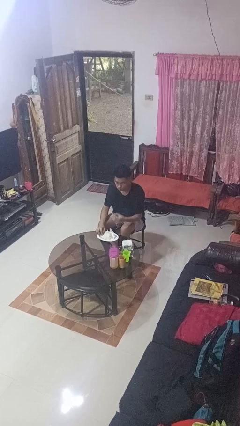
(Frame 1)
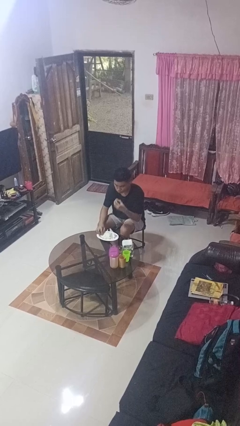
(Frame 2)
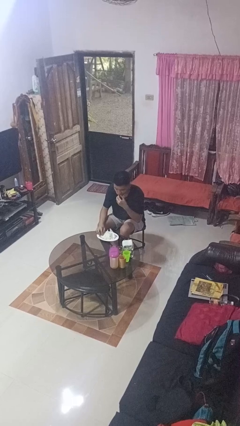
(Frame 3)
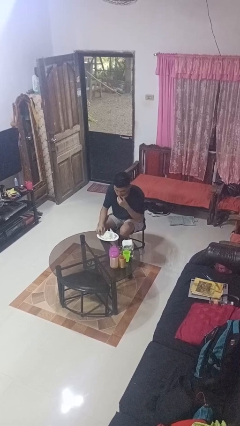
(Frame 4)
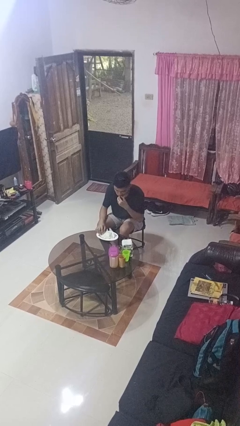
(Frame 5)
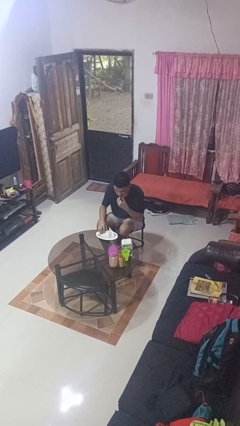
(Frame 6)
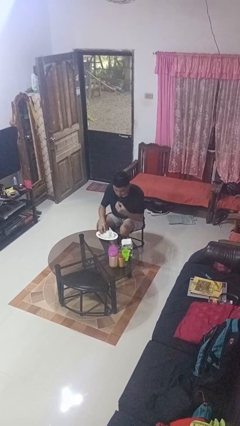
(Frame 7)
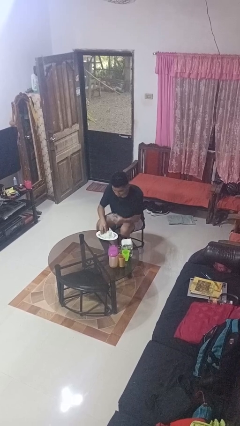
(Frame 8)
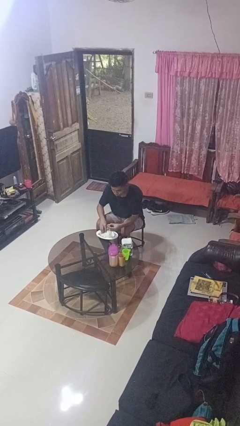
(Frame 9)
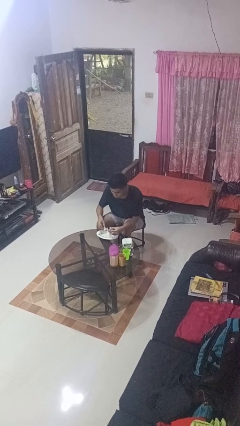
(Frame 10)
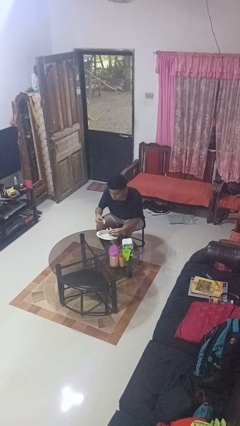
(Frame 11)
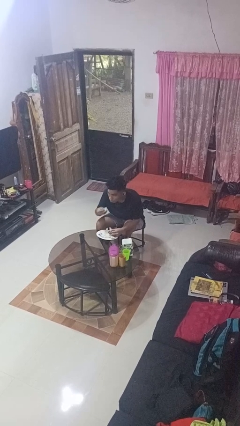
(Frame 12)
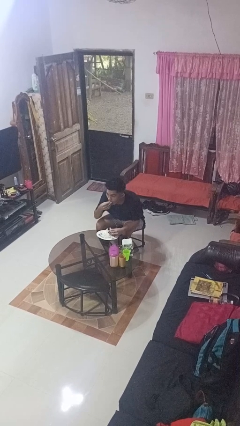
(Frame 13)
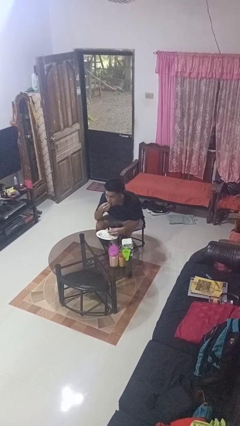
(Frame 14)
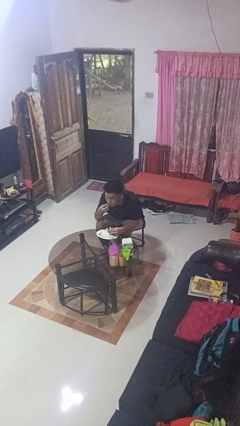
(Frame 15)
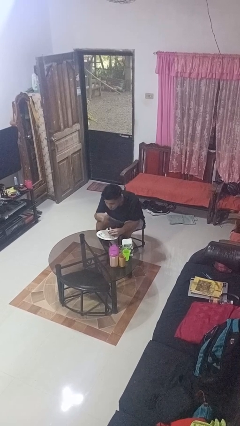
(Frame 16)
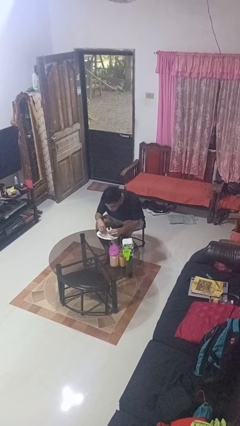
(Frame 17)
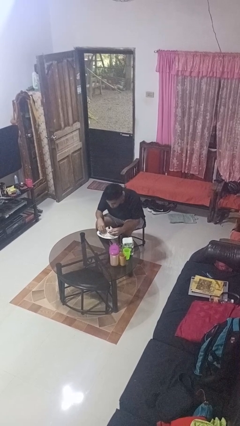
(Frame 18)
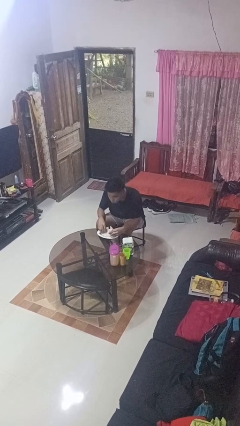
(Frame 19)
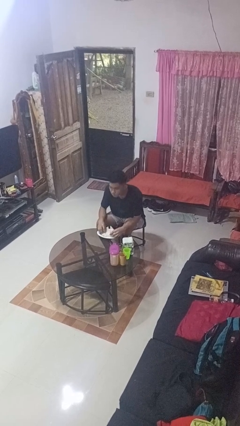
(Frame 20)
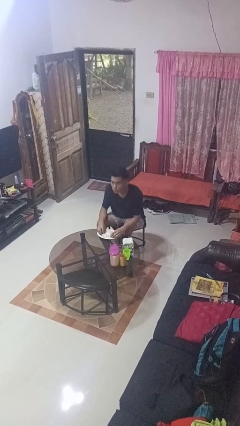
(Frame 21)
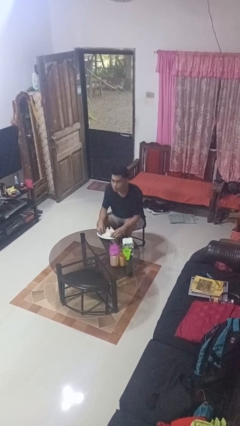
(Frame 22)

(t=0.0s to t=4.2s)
person eats with hands

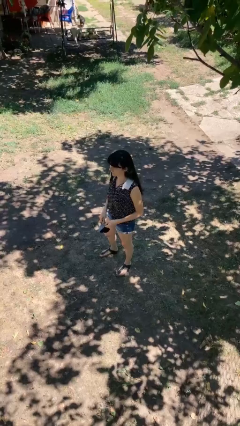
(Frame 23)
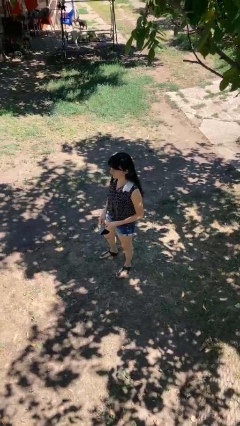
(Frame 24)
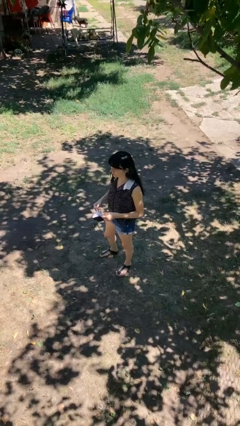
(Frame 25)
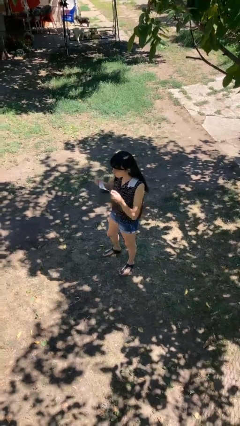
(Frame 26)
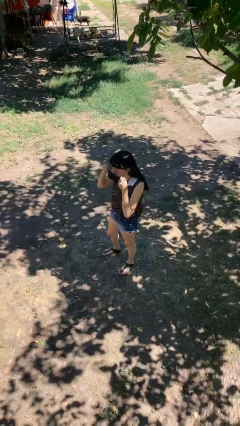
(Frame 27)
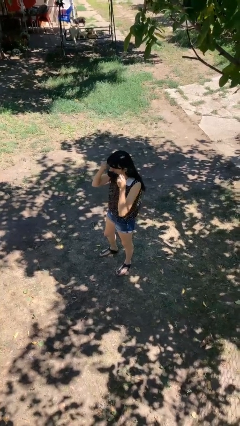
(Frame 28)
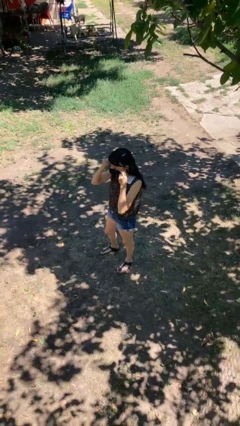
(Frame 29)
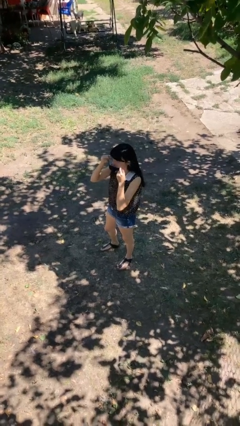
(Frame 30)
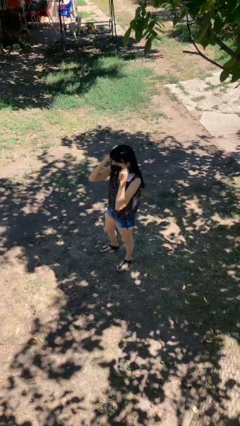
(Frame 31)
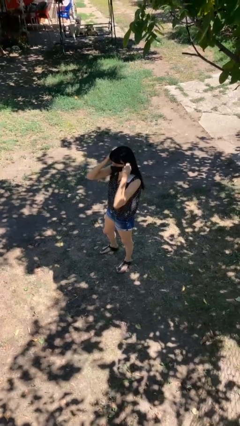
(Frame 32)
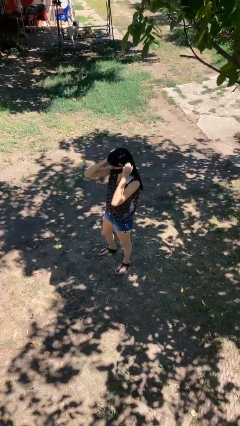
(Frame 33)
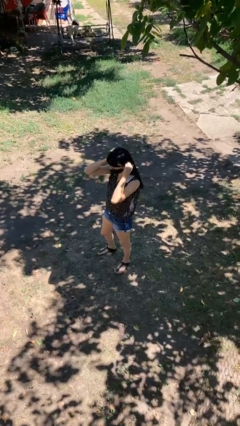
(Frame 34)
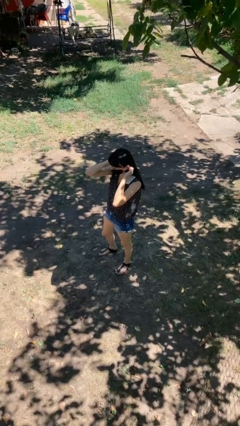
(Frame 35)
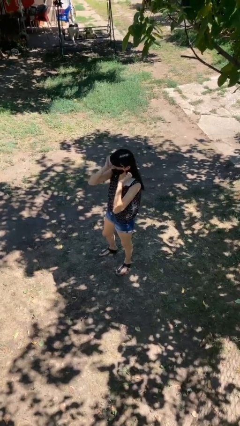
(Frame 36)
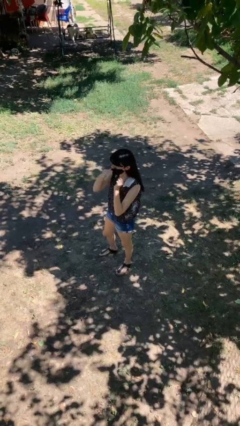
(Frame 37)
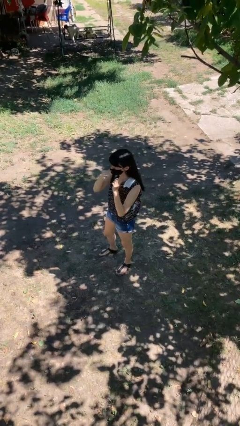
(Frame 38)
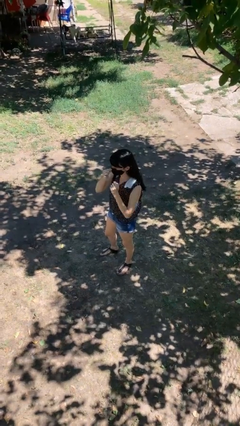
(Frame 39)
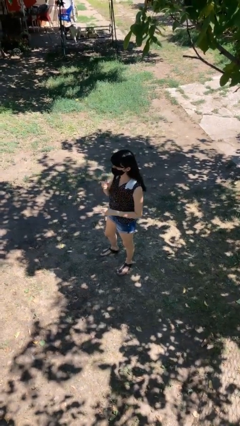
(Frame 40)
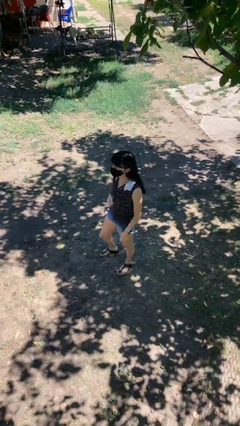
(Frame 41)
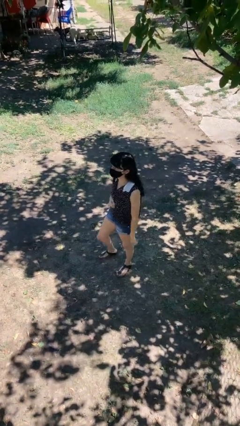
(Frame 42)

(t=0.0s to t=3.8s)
person puts on facemask

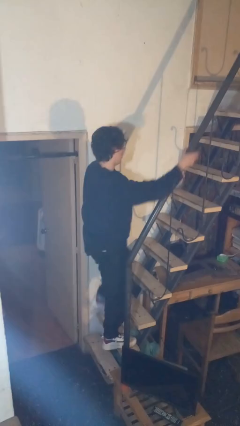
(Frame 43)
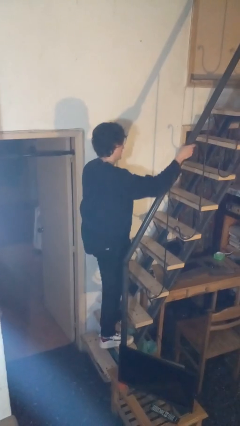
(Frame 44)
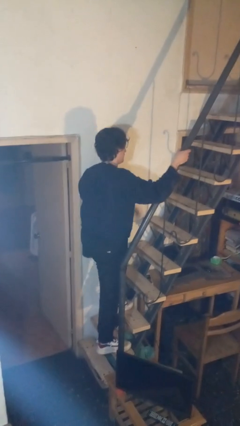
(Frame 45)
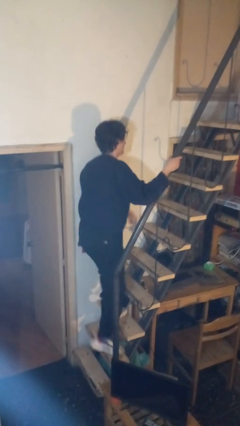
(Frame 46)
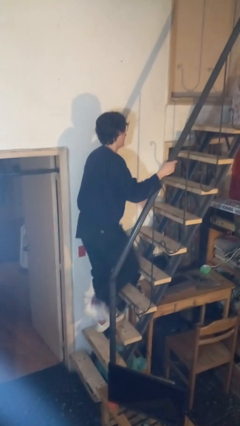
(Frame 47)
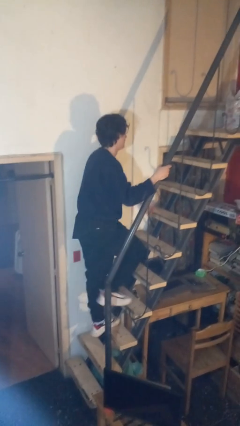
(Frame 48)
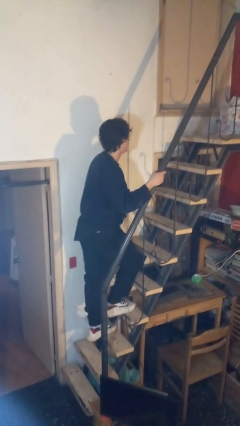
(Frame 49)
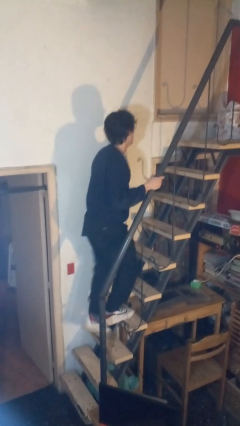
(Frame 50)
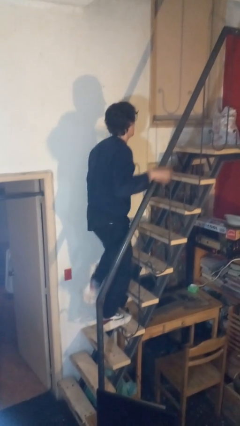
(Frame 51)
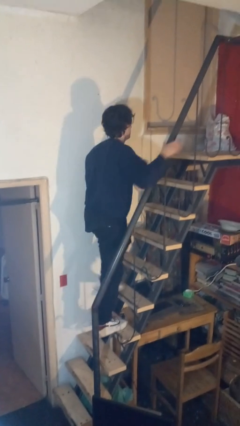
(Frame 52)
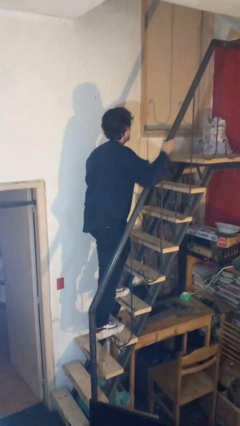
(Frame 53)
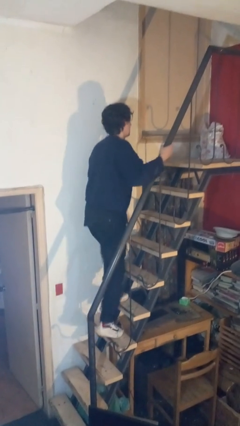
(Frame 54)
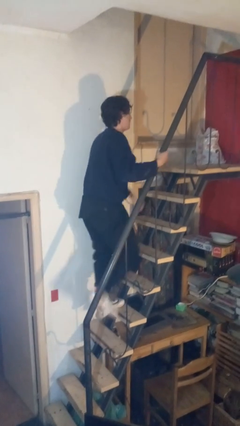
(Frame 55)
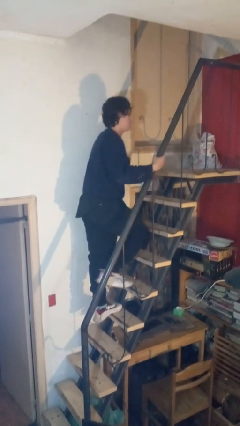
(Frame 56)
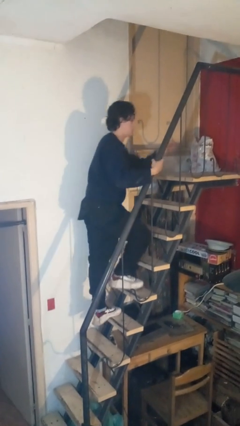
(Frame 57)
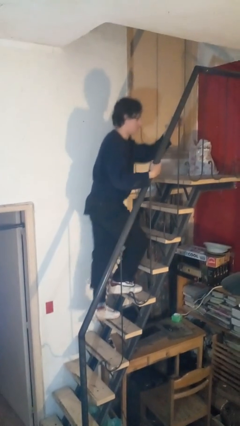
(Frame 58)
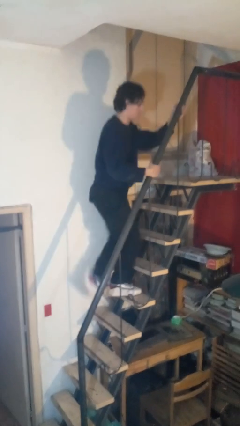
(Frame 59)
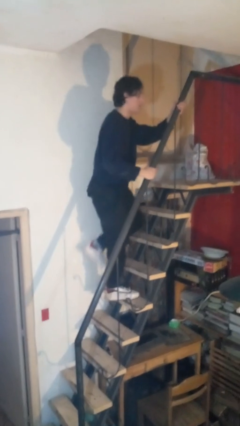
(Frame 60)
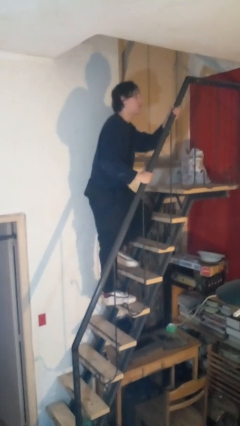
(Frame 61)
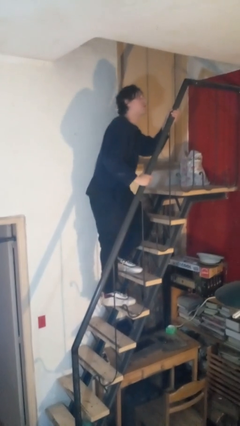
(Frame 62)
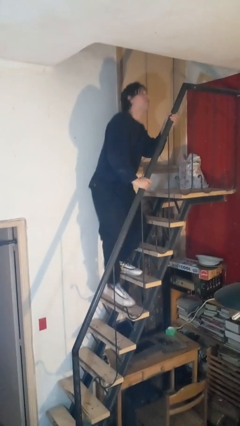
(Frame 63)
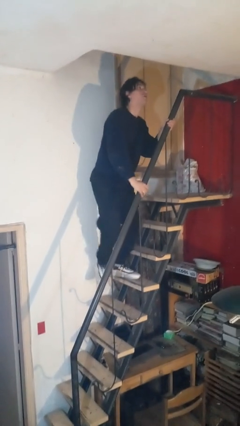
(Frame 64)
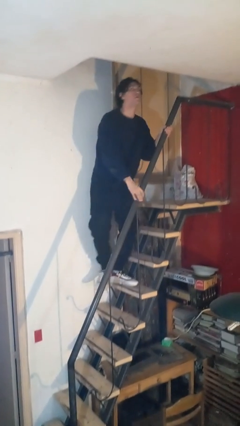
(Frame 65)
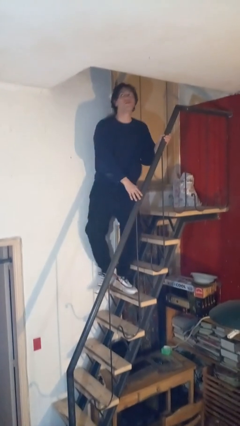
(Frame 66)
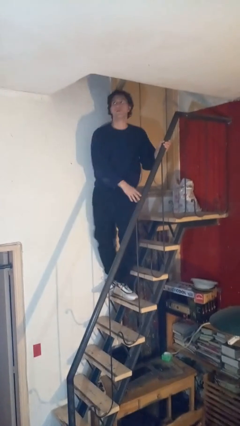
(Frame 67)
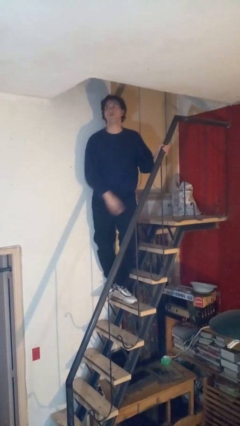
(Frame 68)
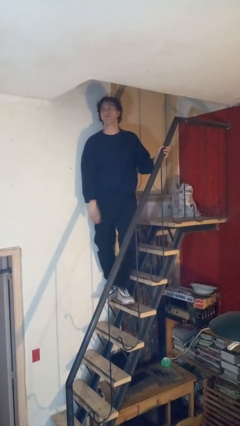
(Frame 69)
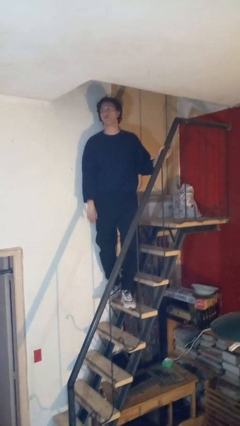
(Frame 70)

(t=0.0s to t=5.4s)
person climbs up stairs

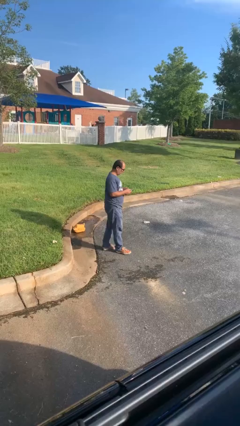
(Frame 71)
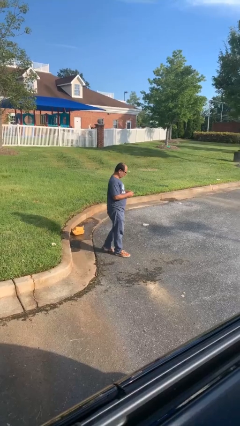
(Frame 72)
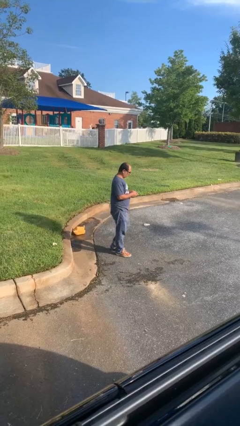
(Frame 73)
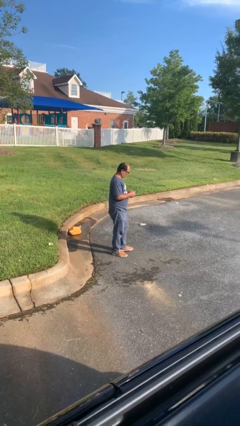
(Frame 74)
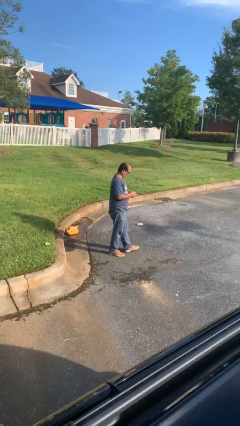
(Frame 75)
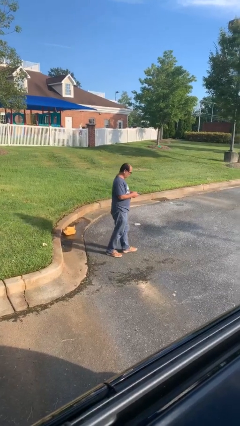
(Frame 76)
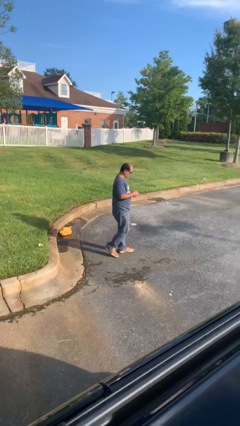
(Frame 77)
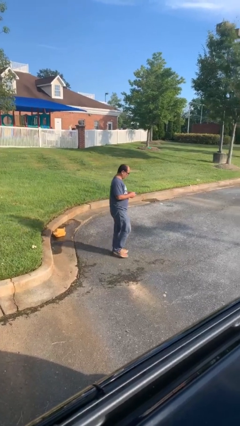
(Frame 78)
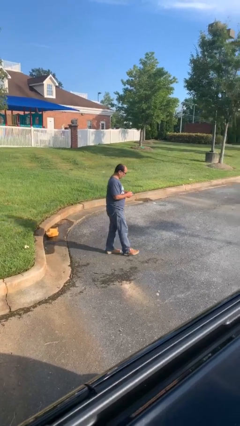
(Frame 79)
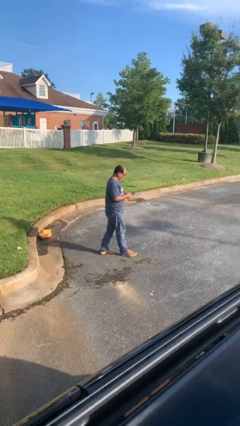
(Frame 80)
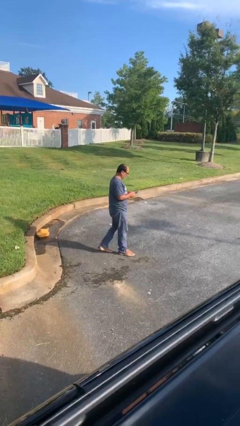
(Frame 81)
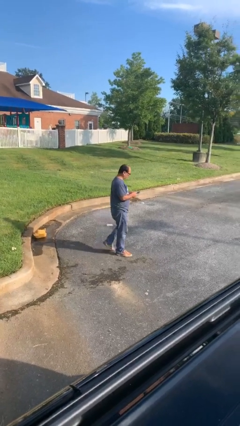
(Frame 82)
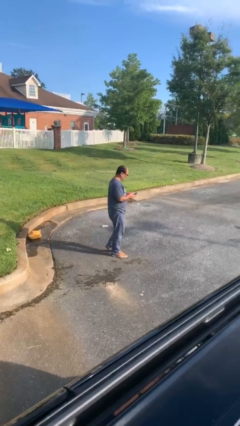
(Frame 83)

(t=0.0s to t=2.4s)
person texts on phone

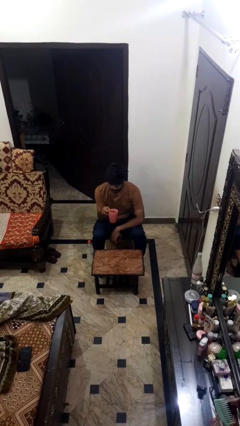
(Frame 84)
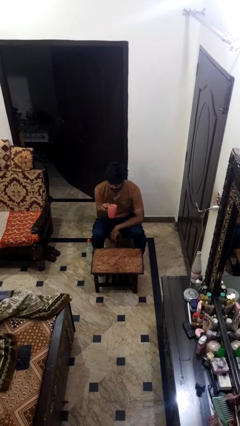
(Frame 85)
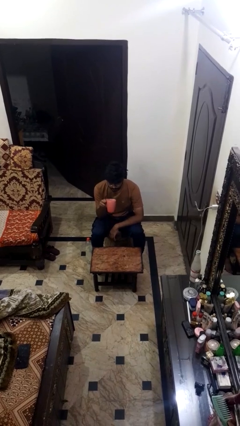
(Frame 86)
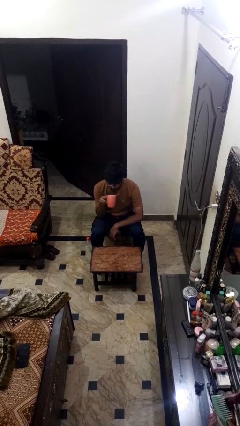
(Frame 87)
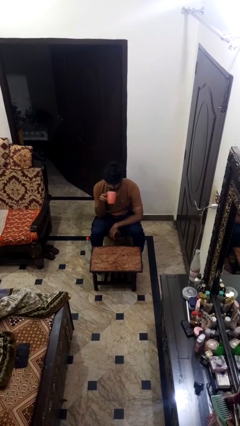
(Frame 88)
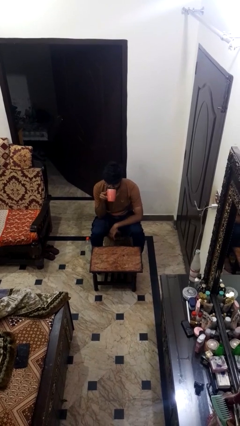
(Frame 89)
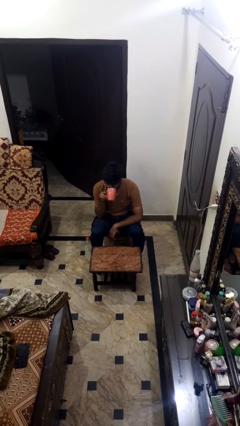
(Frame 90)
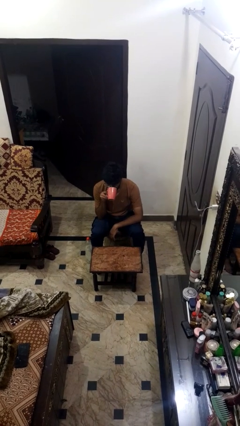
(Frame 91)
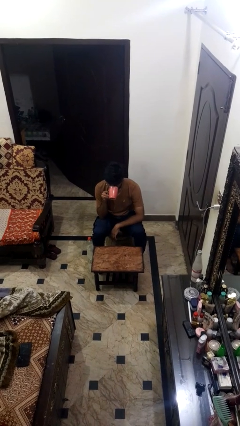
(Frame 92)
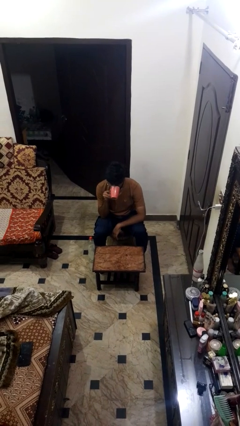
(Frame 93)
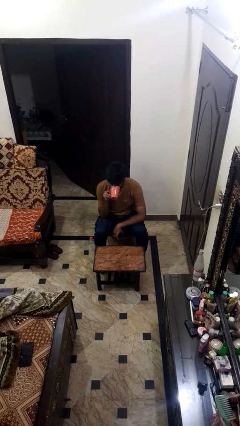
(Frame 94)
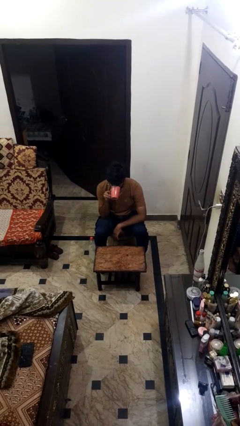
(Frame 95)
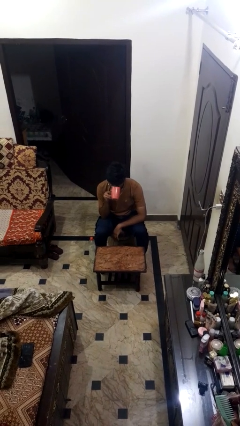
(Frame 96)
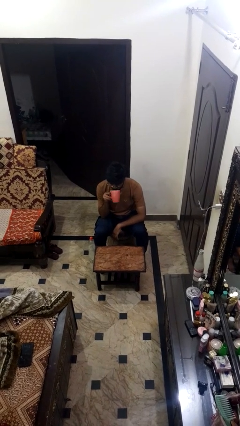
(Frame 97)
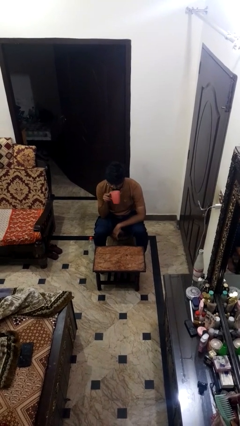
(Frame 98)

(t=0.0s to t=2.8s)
person drinks from mug
